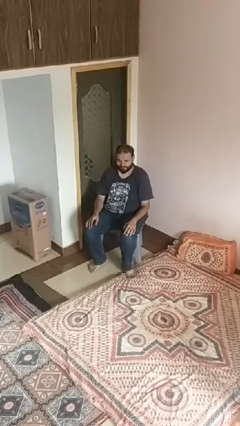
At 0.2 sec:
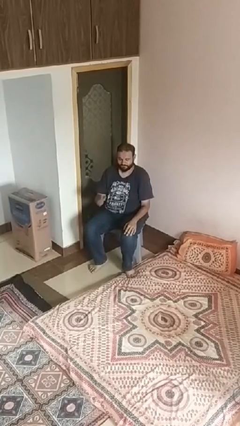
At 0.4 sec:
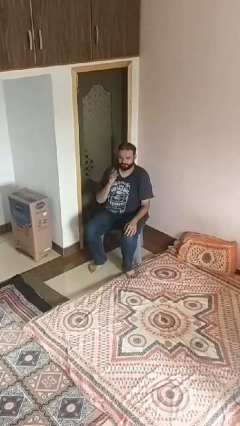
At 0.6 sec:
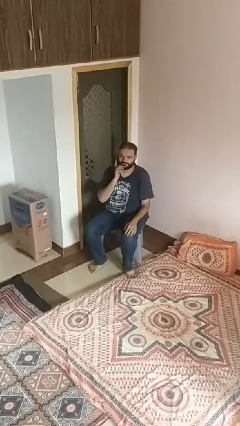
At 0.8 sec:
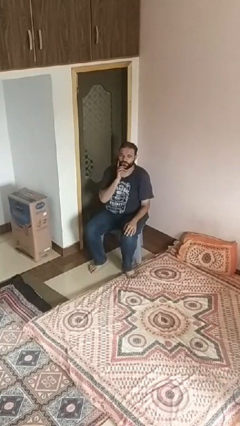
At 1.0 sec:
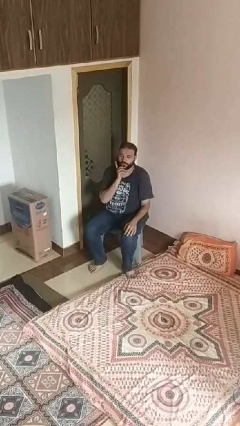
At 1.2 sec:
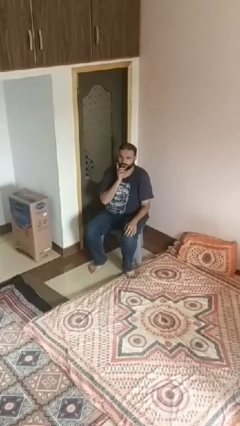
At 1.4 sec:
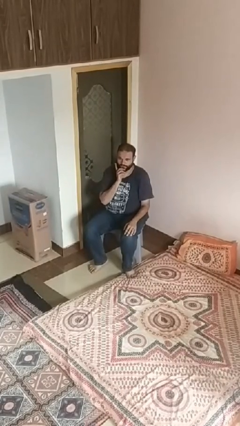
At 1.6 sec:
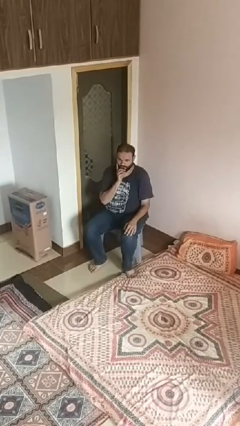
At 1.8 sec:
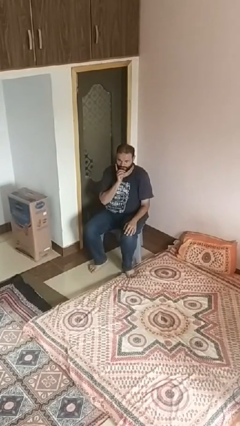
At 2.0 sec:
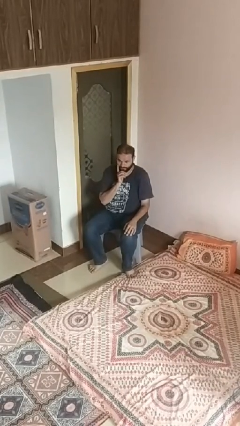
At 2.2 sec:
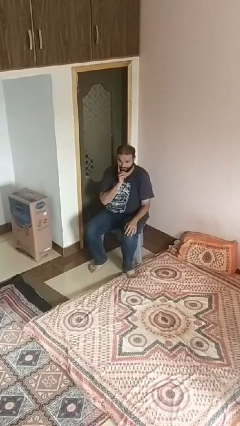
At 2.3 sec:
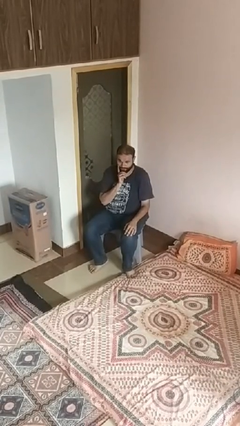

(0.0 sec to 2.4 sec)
person strokes chin

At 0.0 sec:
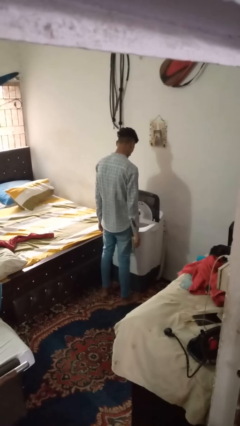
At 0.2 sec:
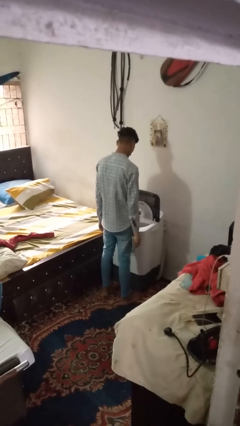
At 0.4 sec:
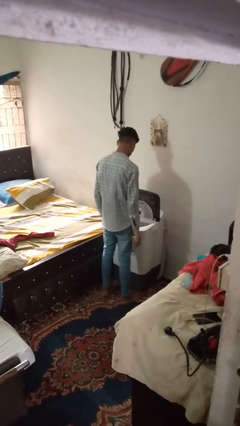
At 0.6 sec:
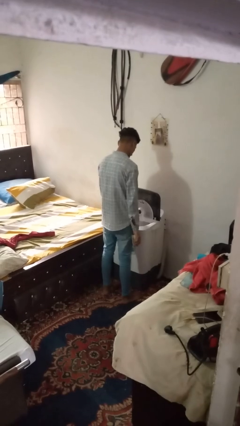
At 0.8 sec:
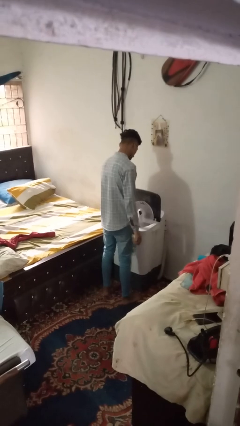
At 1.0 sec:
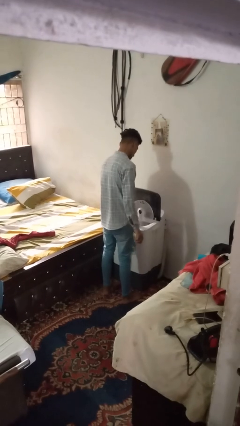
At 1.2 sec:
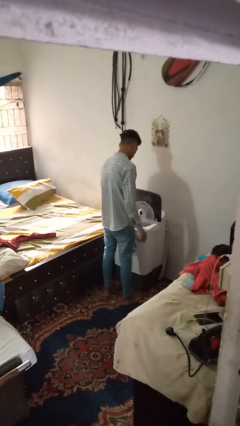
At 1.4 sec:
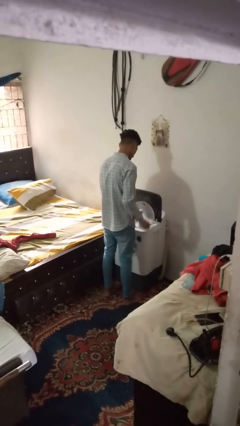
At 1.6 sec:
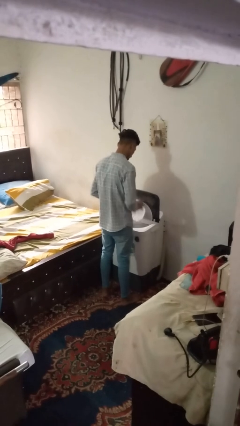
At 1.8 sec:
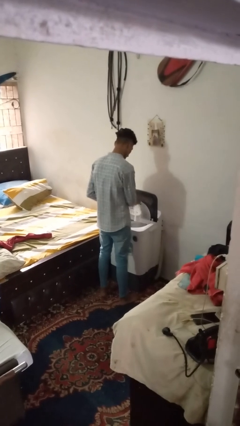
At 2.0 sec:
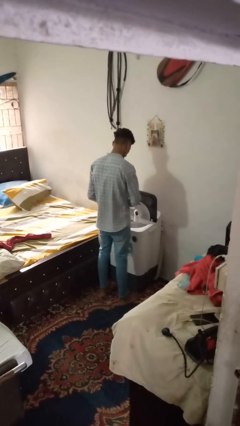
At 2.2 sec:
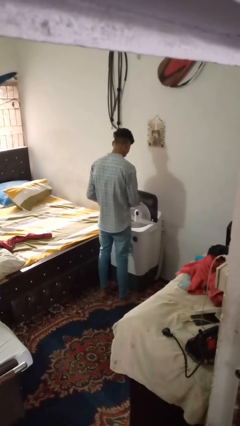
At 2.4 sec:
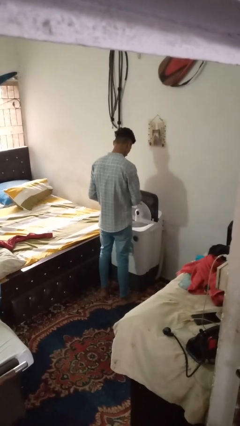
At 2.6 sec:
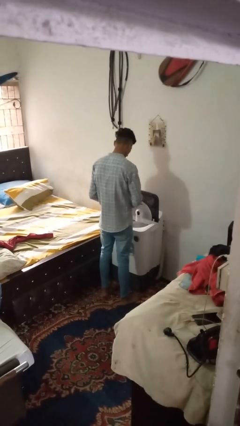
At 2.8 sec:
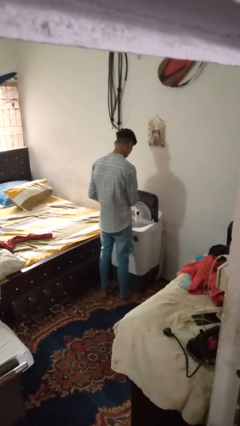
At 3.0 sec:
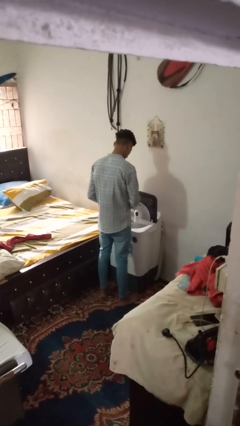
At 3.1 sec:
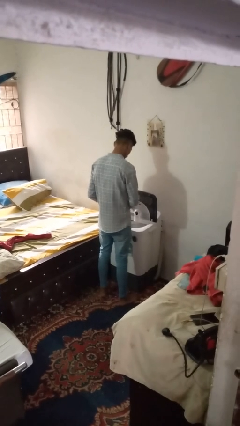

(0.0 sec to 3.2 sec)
person cleans dryer lint trap

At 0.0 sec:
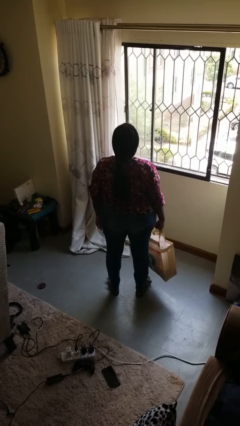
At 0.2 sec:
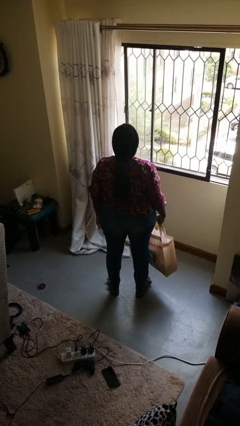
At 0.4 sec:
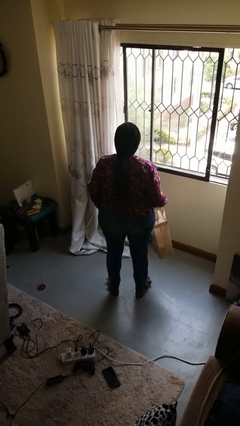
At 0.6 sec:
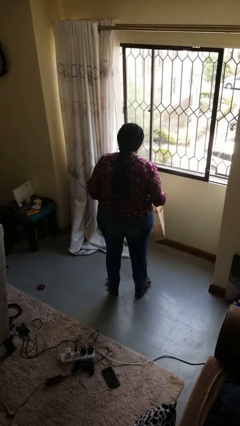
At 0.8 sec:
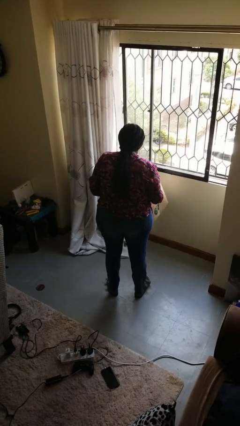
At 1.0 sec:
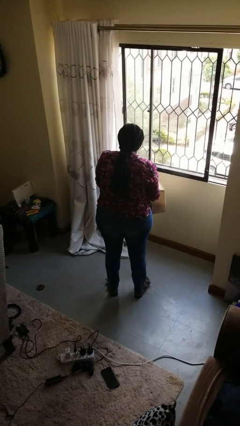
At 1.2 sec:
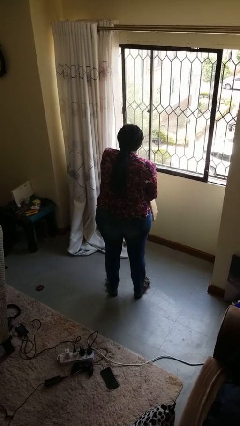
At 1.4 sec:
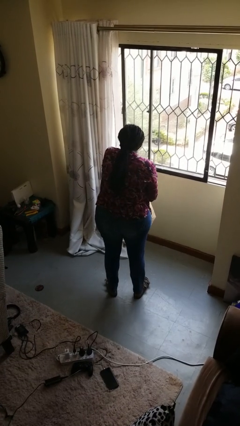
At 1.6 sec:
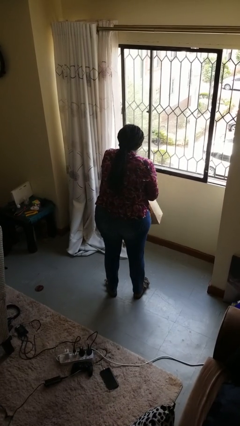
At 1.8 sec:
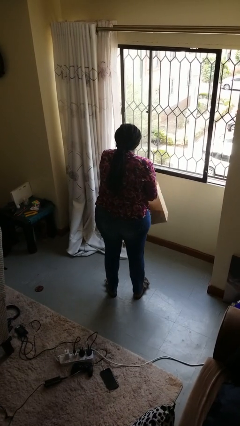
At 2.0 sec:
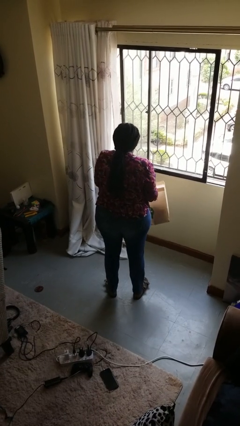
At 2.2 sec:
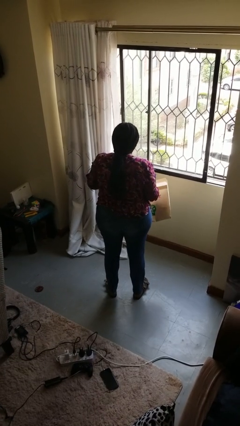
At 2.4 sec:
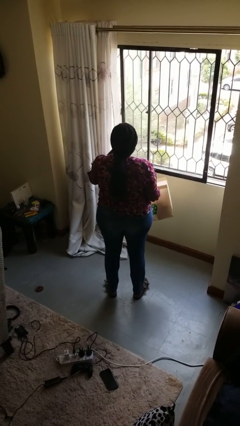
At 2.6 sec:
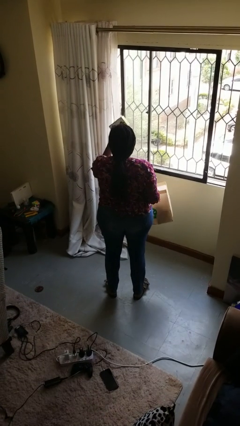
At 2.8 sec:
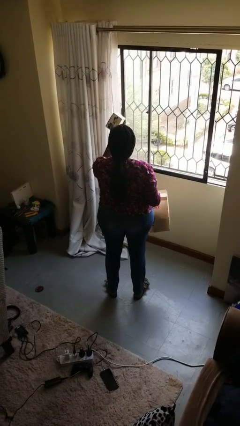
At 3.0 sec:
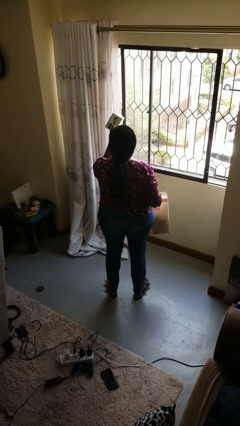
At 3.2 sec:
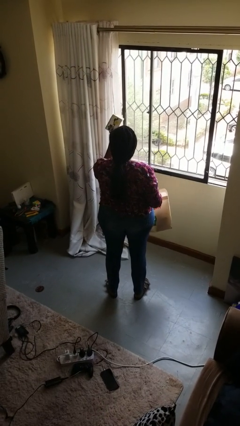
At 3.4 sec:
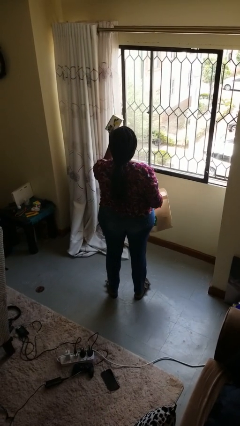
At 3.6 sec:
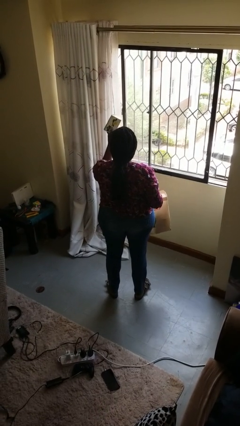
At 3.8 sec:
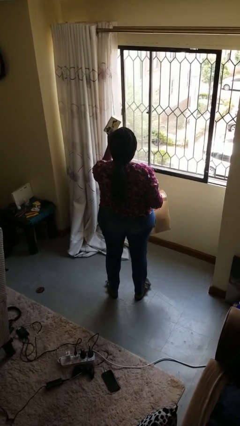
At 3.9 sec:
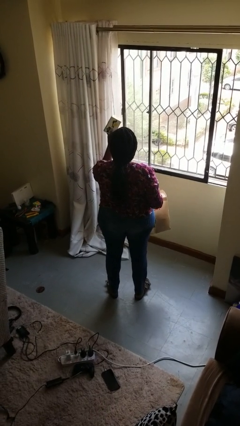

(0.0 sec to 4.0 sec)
person takes object from bag

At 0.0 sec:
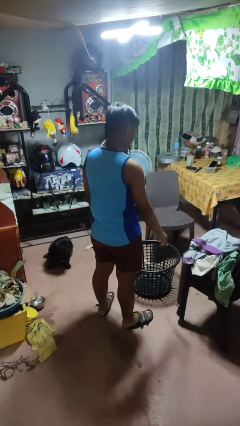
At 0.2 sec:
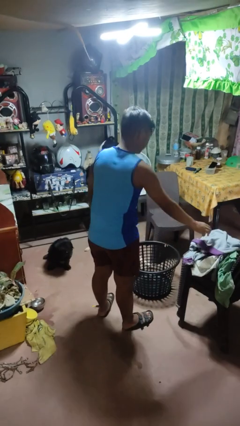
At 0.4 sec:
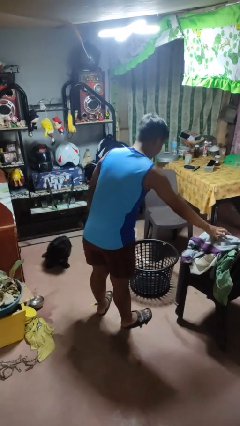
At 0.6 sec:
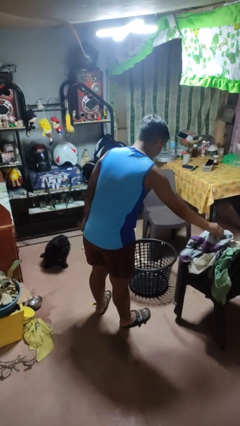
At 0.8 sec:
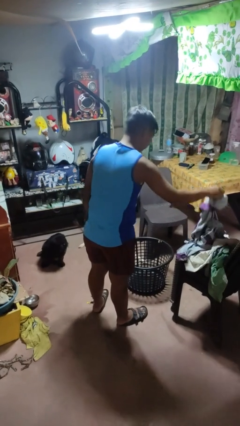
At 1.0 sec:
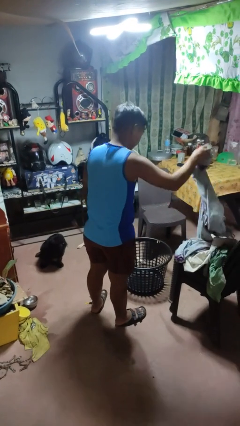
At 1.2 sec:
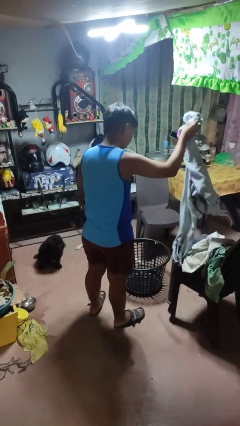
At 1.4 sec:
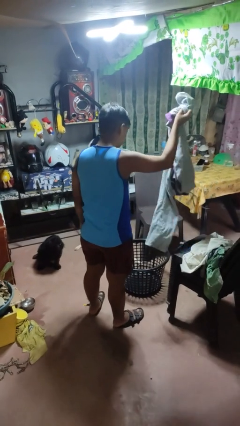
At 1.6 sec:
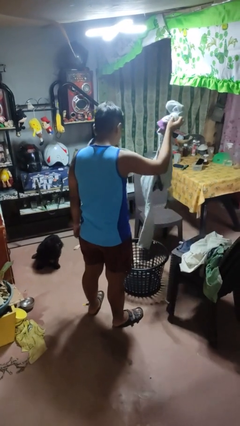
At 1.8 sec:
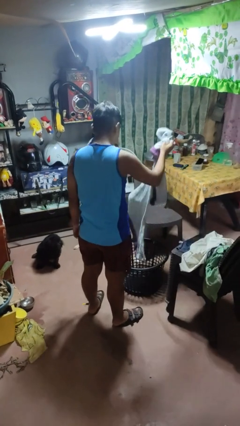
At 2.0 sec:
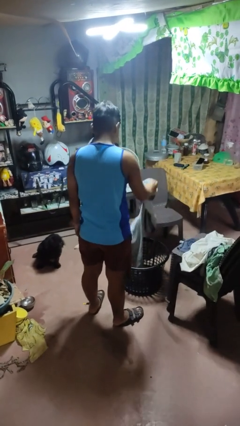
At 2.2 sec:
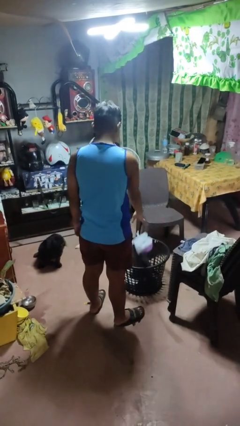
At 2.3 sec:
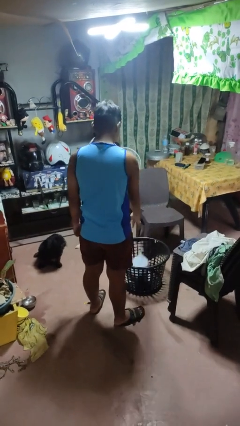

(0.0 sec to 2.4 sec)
person puts object into basket

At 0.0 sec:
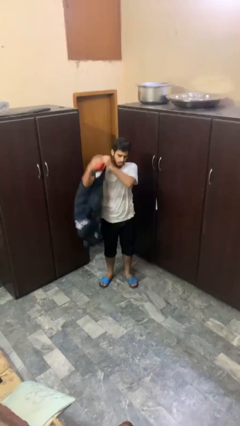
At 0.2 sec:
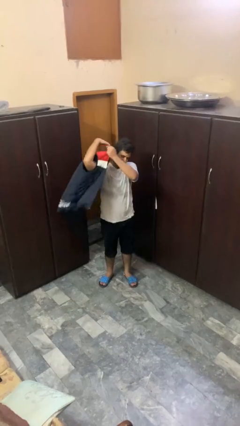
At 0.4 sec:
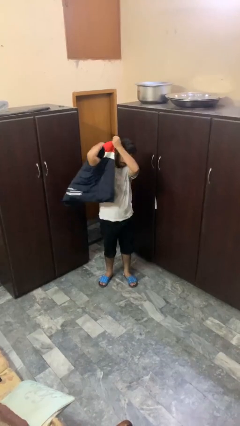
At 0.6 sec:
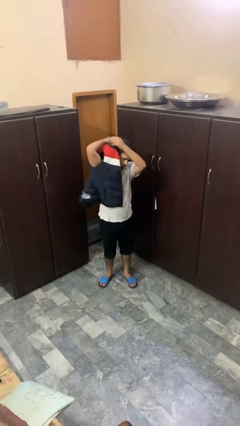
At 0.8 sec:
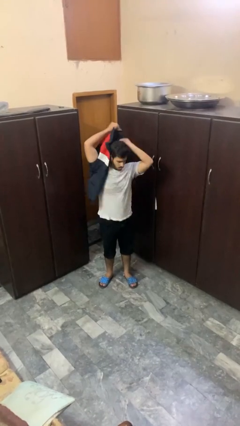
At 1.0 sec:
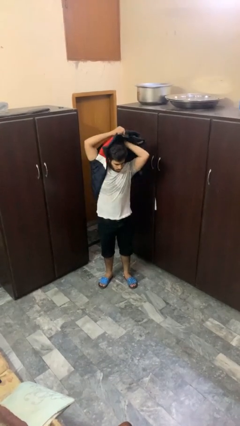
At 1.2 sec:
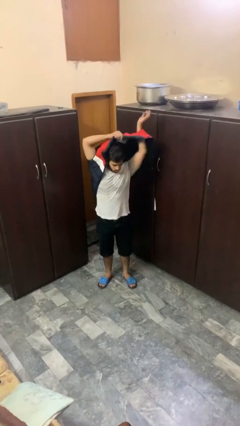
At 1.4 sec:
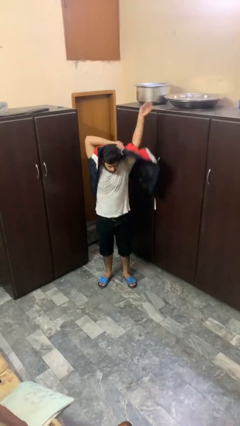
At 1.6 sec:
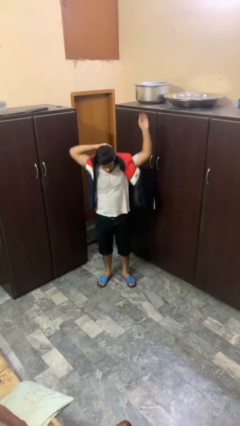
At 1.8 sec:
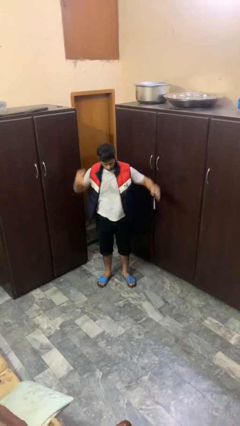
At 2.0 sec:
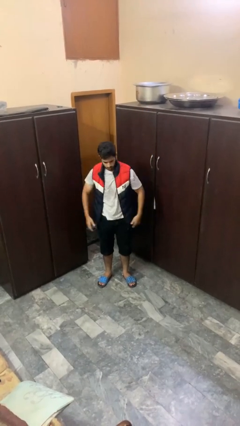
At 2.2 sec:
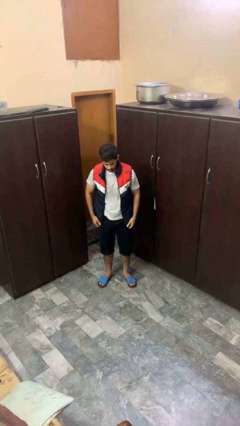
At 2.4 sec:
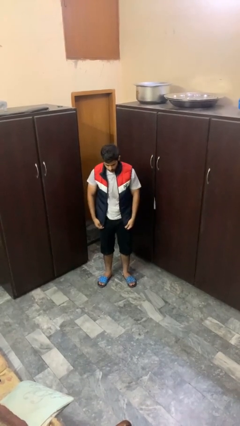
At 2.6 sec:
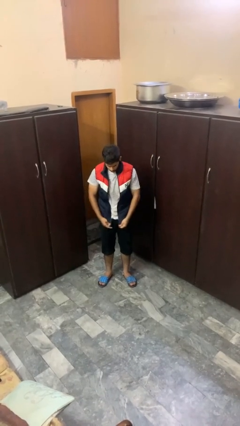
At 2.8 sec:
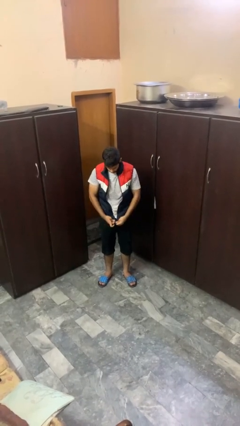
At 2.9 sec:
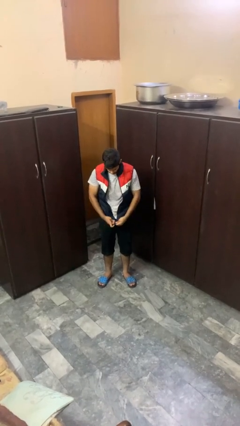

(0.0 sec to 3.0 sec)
person puts on jacket

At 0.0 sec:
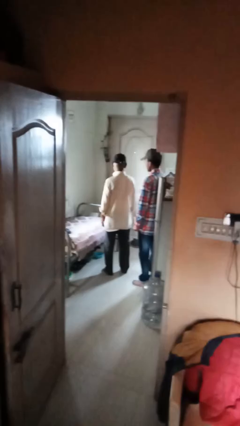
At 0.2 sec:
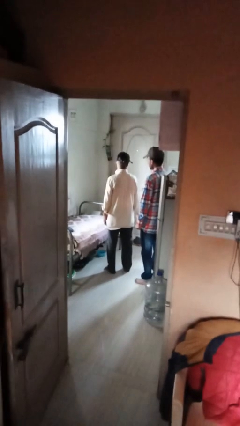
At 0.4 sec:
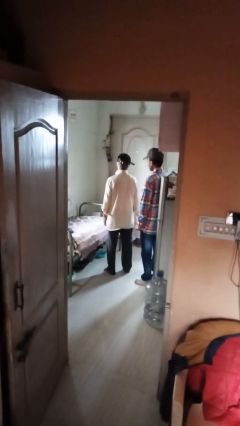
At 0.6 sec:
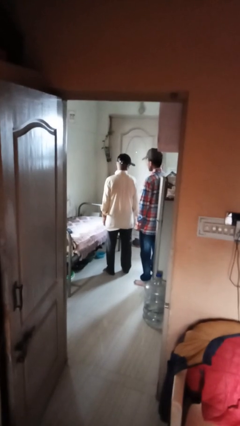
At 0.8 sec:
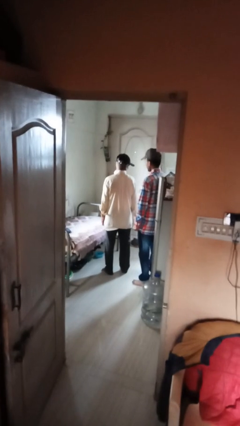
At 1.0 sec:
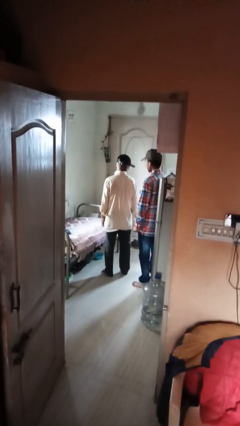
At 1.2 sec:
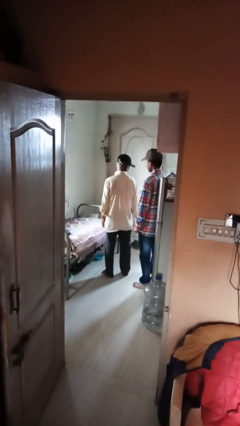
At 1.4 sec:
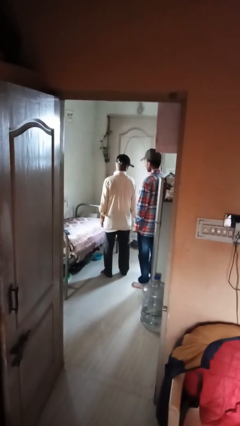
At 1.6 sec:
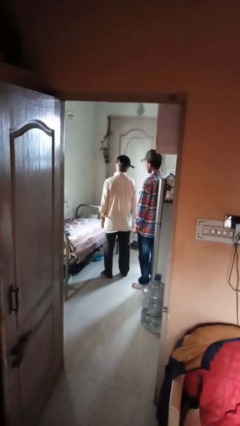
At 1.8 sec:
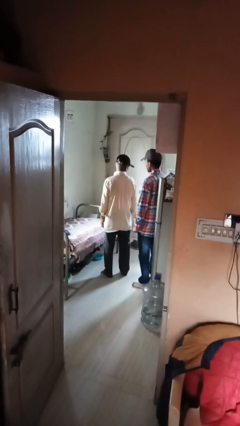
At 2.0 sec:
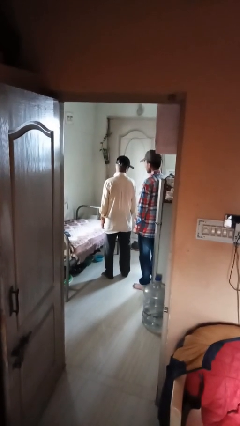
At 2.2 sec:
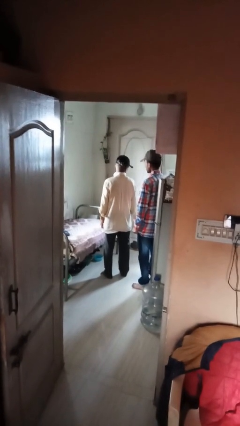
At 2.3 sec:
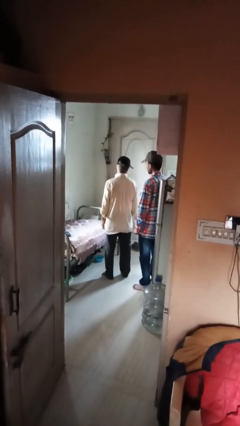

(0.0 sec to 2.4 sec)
person looks over shoulder
